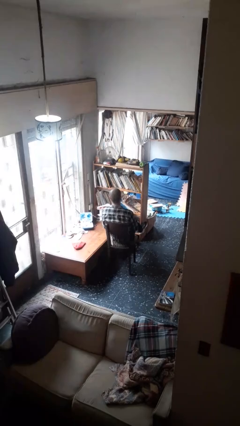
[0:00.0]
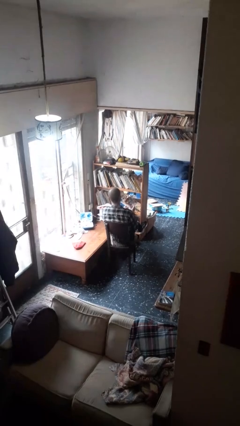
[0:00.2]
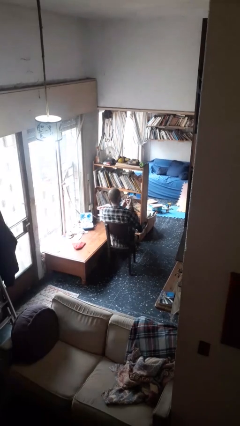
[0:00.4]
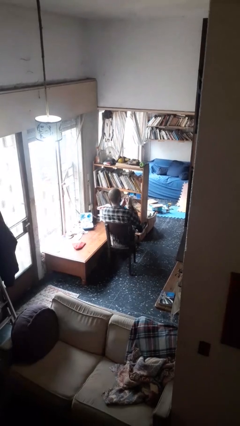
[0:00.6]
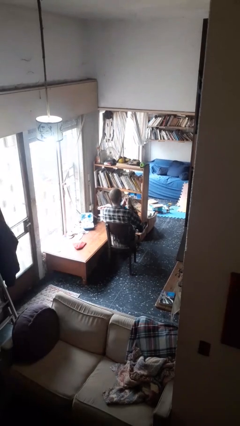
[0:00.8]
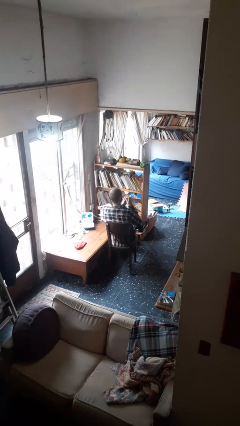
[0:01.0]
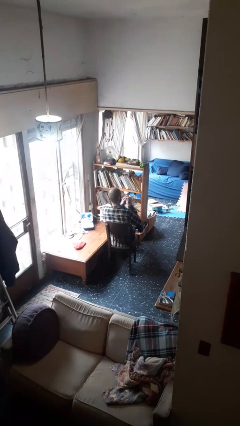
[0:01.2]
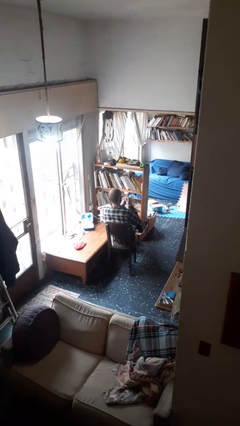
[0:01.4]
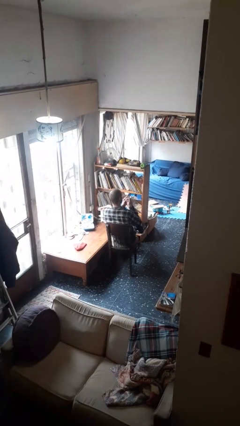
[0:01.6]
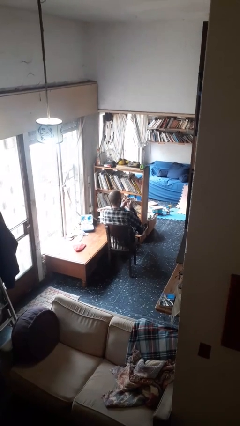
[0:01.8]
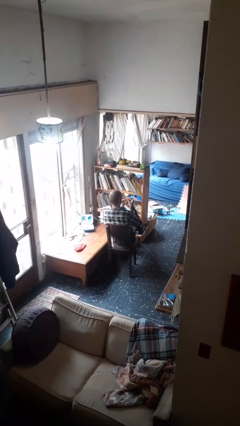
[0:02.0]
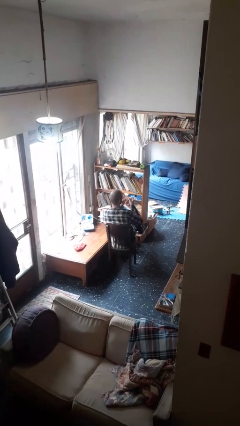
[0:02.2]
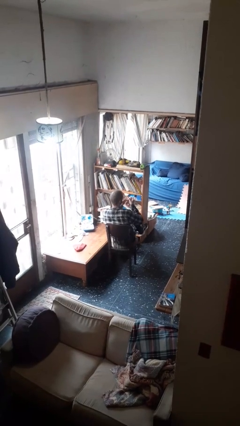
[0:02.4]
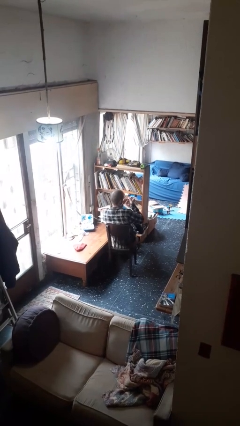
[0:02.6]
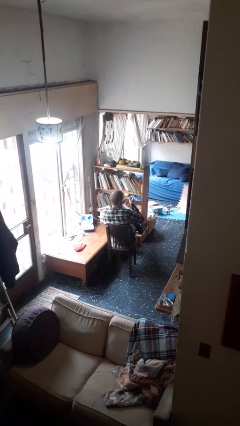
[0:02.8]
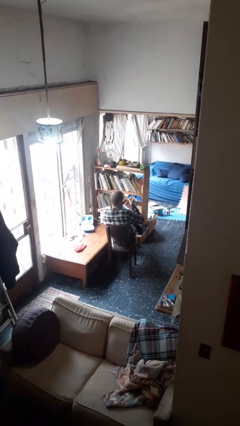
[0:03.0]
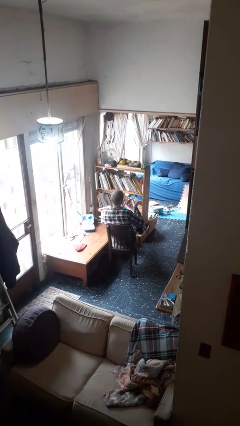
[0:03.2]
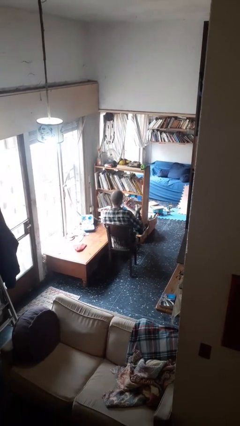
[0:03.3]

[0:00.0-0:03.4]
person clips fingernails

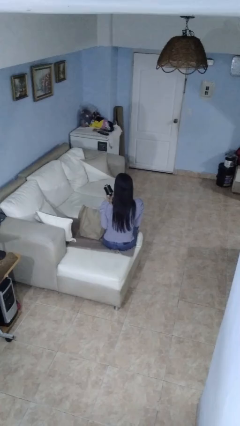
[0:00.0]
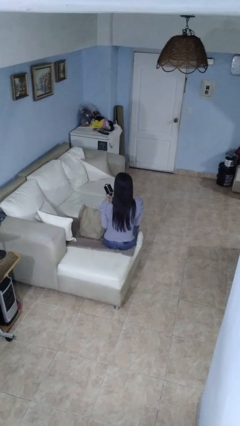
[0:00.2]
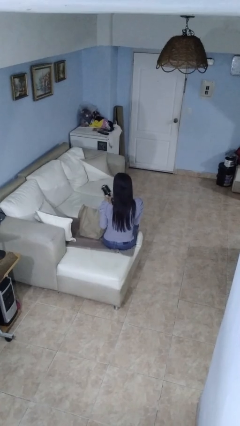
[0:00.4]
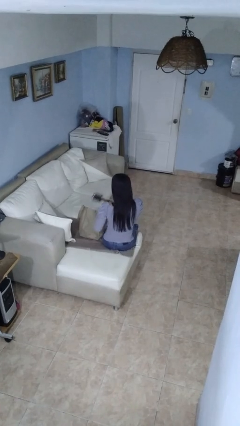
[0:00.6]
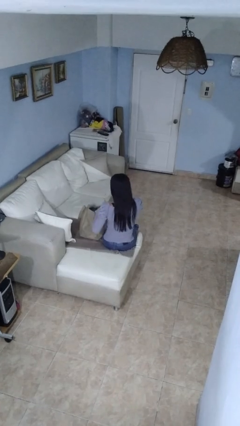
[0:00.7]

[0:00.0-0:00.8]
person puts object into bag

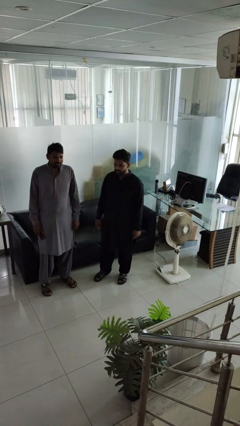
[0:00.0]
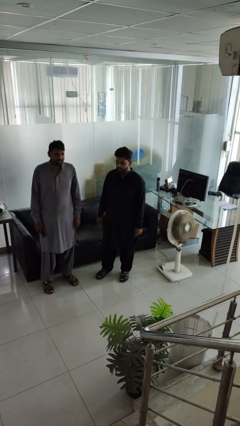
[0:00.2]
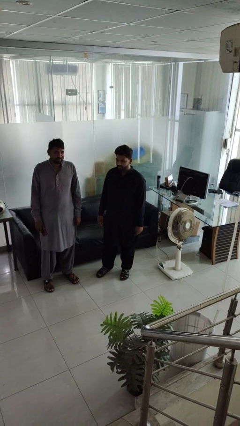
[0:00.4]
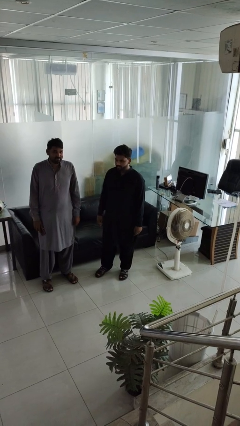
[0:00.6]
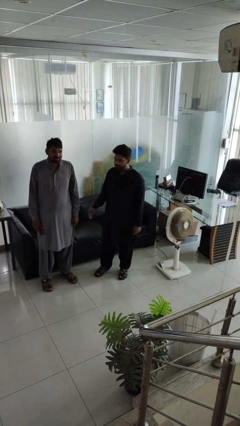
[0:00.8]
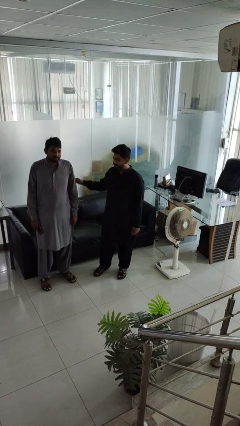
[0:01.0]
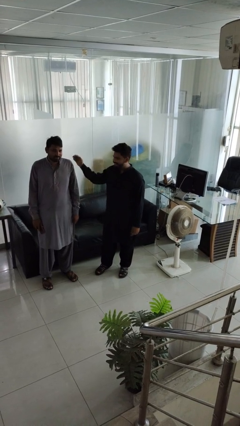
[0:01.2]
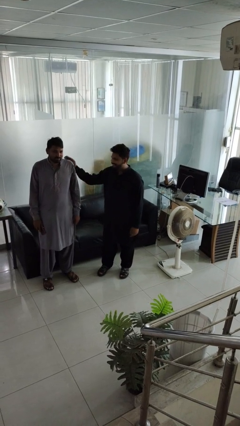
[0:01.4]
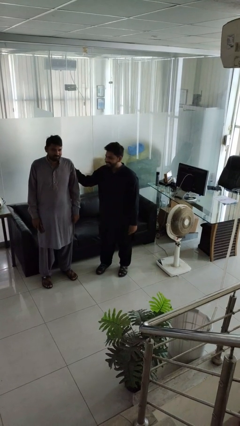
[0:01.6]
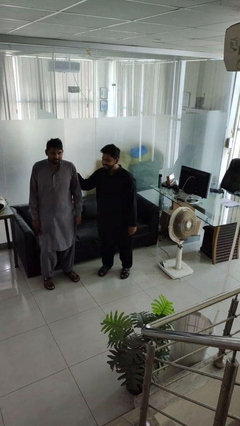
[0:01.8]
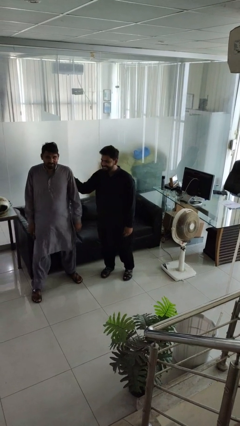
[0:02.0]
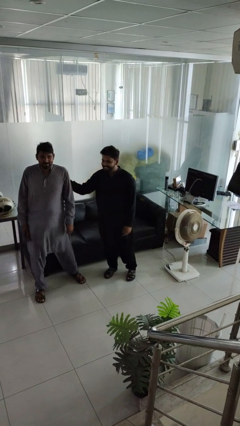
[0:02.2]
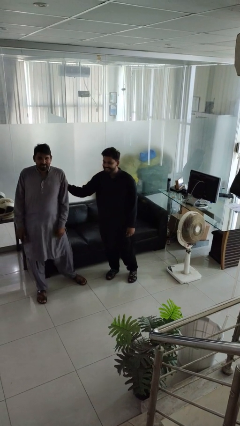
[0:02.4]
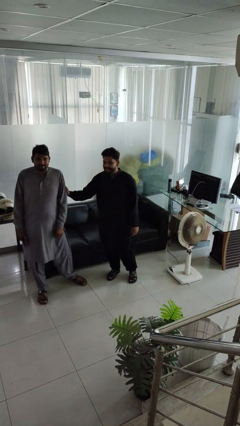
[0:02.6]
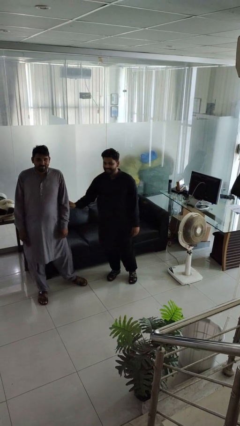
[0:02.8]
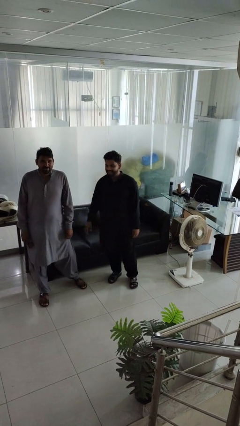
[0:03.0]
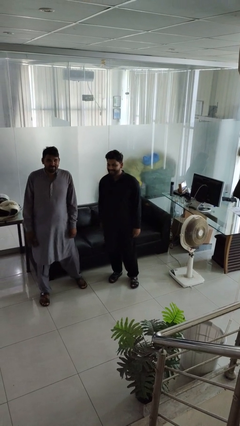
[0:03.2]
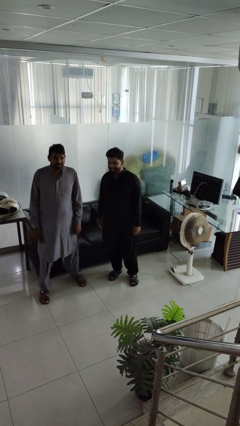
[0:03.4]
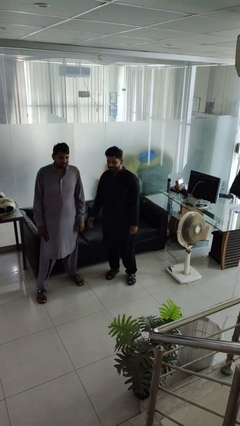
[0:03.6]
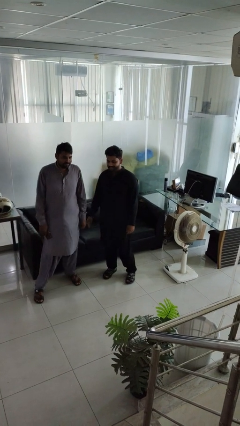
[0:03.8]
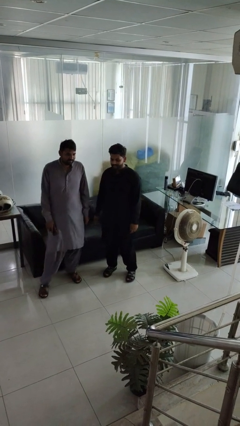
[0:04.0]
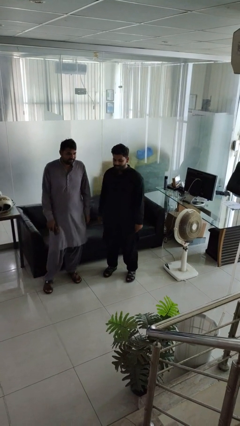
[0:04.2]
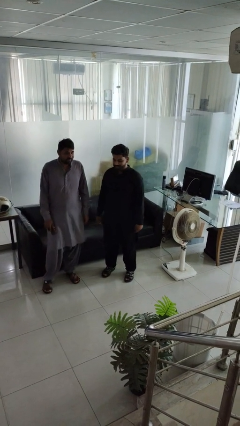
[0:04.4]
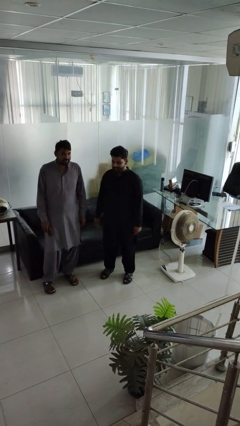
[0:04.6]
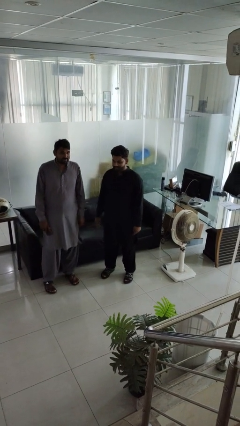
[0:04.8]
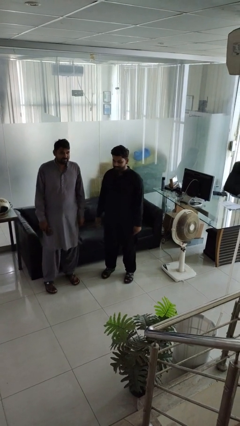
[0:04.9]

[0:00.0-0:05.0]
person shoves person

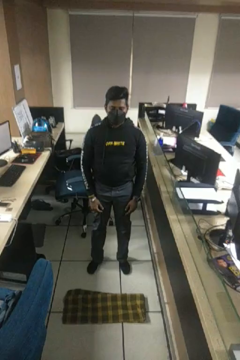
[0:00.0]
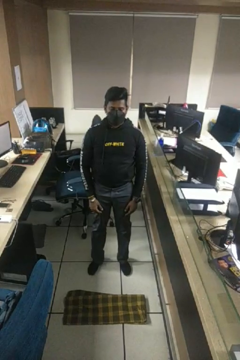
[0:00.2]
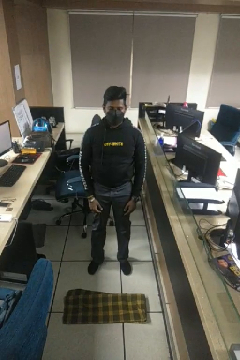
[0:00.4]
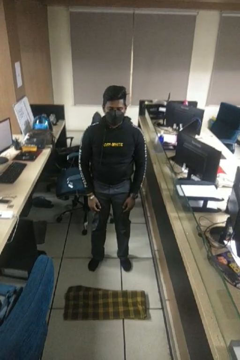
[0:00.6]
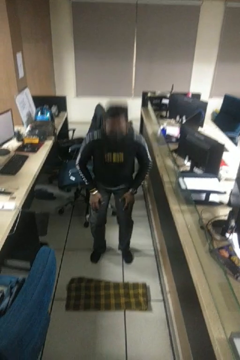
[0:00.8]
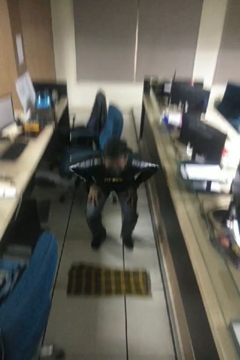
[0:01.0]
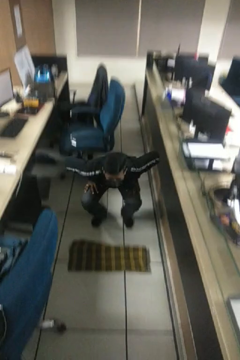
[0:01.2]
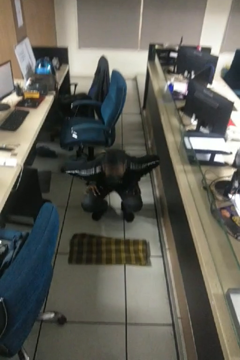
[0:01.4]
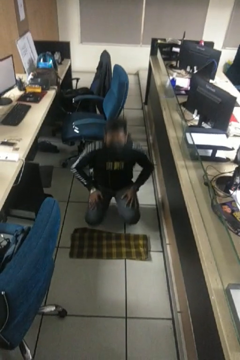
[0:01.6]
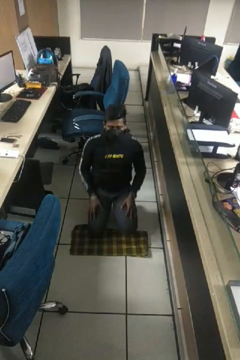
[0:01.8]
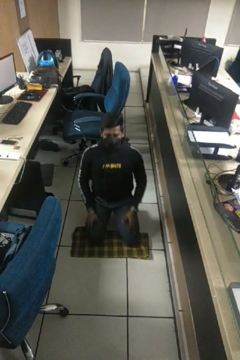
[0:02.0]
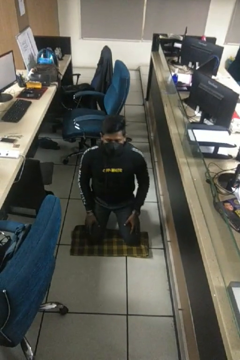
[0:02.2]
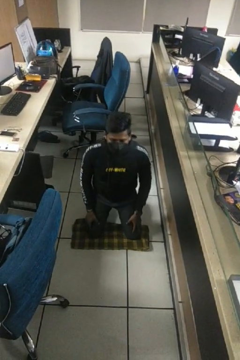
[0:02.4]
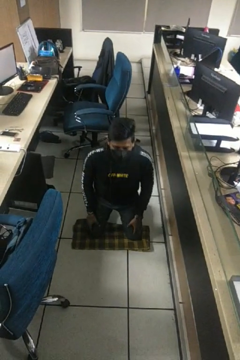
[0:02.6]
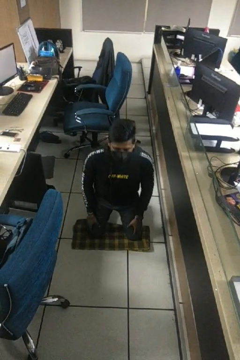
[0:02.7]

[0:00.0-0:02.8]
person kneels

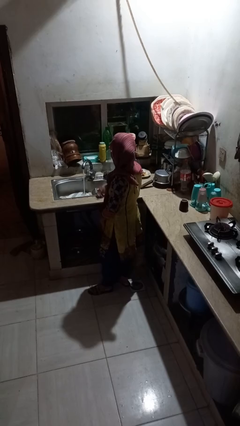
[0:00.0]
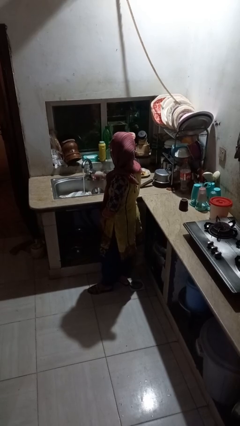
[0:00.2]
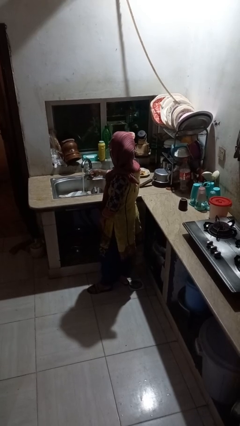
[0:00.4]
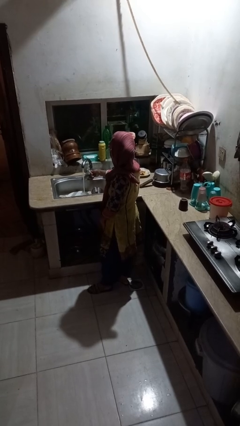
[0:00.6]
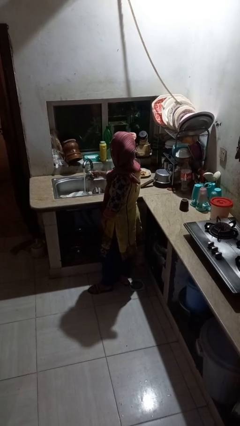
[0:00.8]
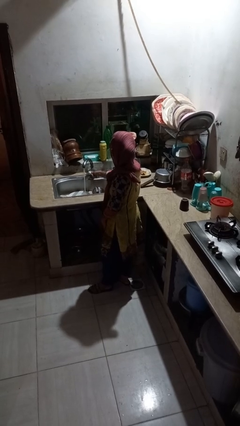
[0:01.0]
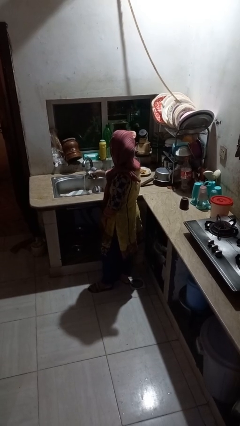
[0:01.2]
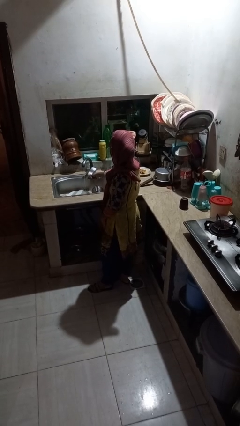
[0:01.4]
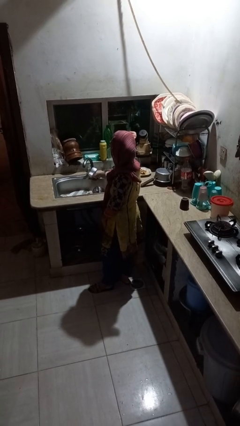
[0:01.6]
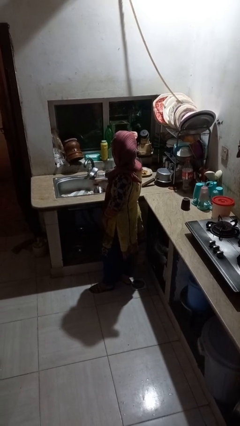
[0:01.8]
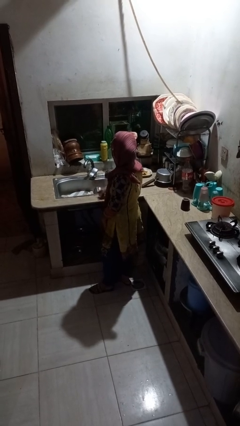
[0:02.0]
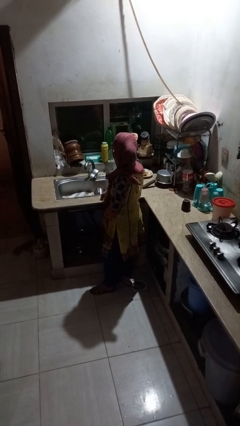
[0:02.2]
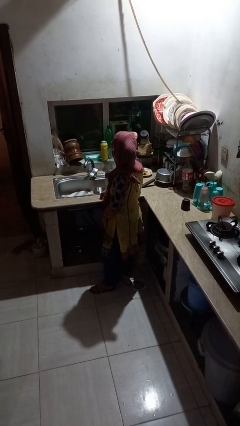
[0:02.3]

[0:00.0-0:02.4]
person turns off faucet

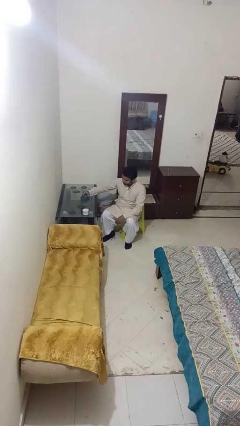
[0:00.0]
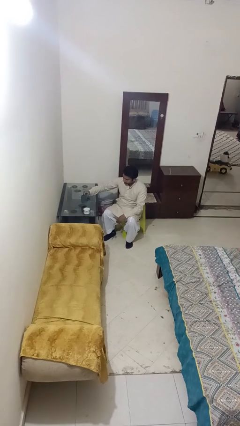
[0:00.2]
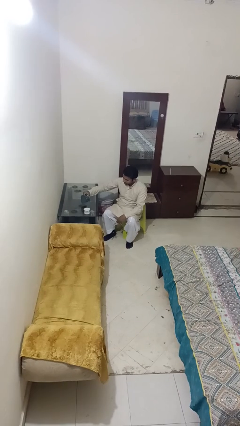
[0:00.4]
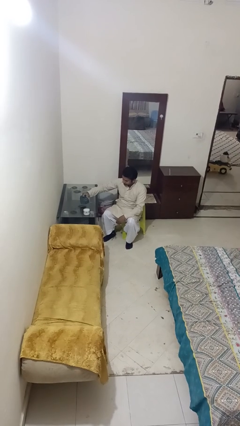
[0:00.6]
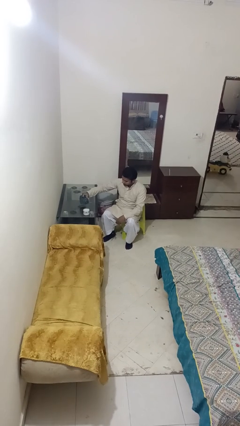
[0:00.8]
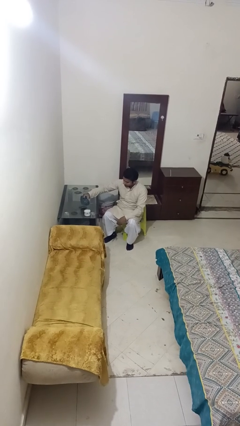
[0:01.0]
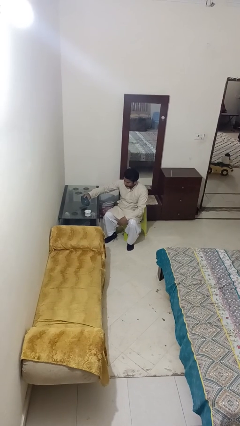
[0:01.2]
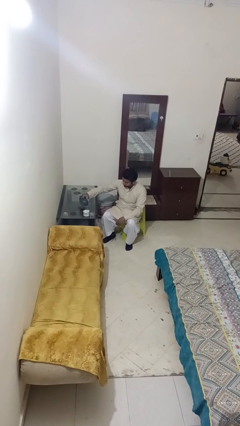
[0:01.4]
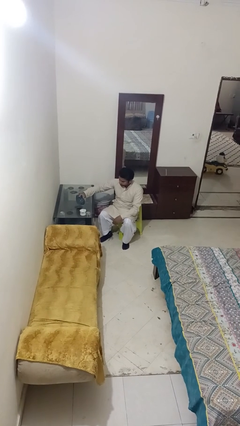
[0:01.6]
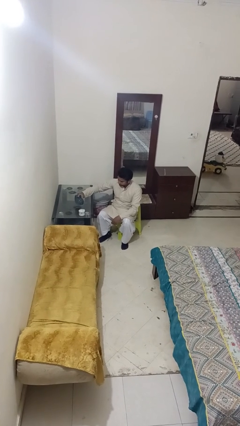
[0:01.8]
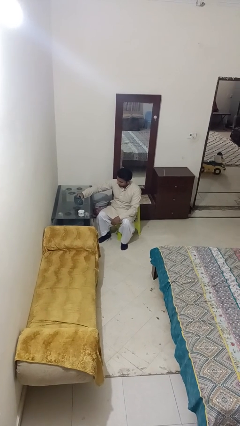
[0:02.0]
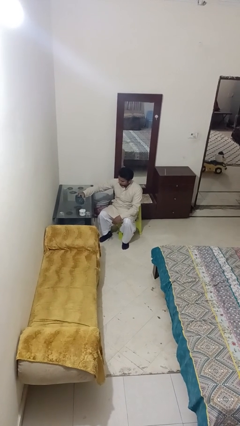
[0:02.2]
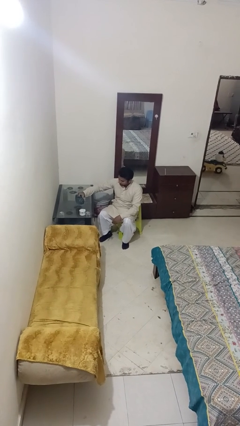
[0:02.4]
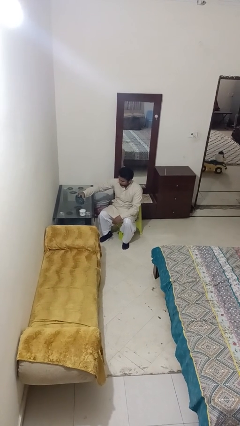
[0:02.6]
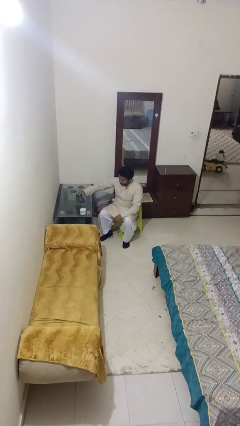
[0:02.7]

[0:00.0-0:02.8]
person pours liquid into cup
